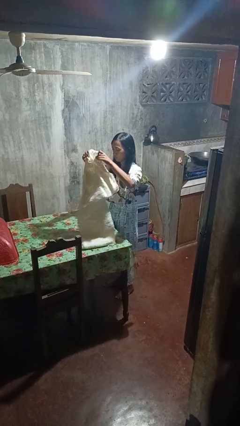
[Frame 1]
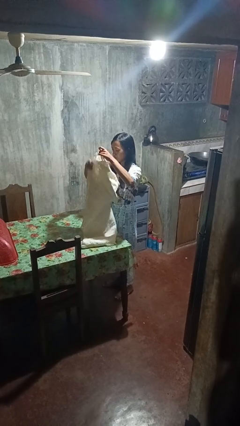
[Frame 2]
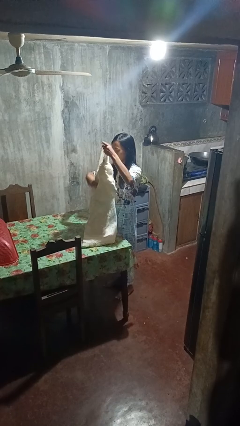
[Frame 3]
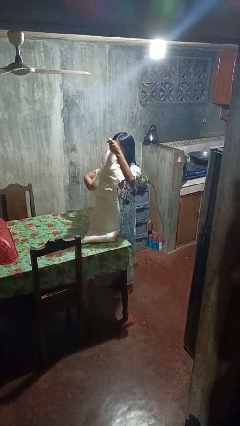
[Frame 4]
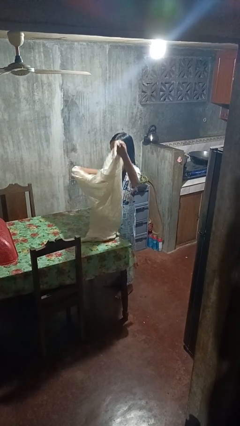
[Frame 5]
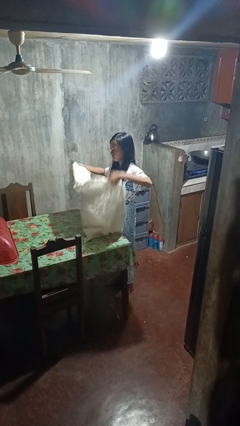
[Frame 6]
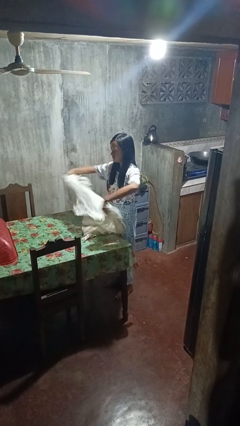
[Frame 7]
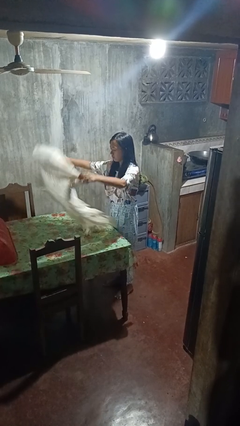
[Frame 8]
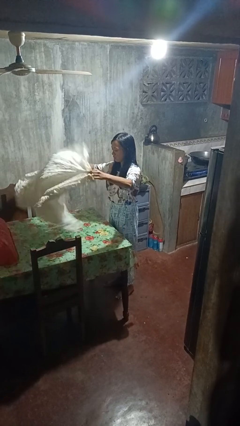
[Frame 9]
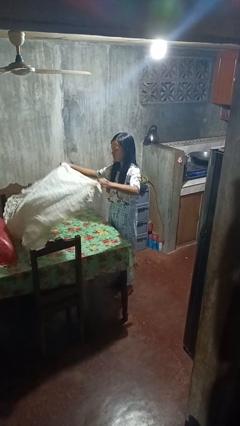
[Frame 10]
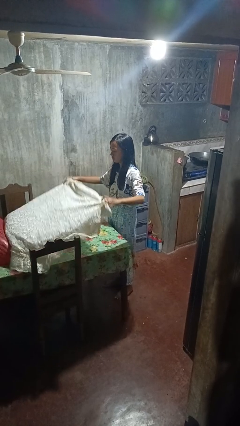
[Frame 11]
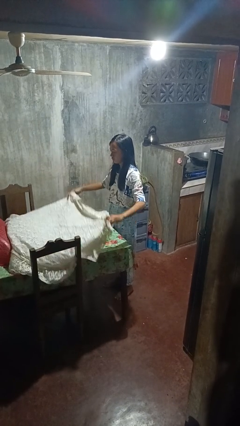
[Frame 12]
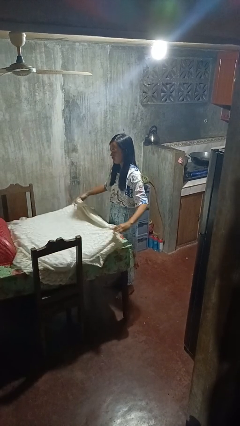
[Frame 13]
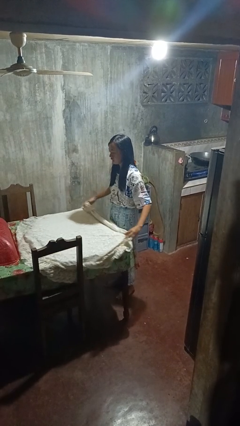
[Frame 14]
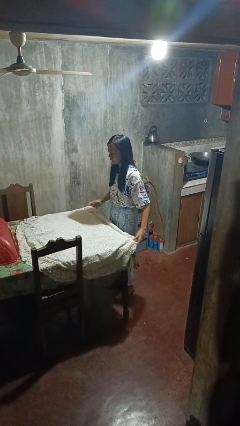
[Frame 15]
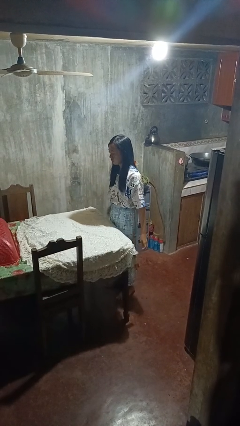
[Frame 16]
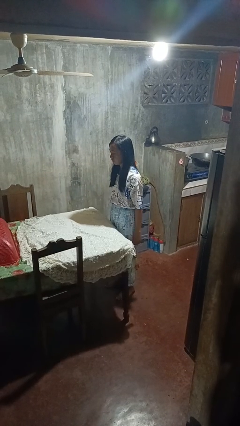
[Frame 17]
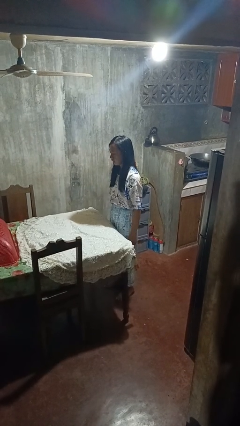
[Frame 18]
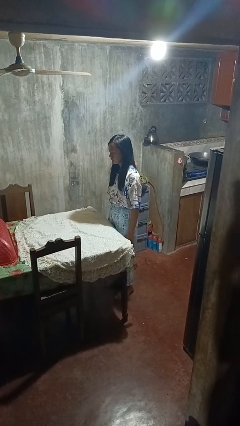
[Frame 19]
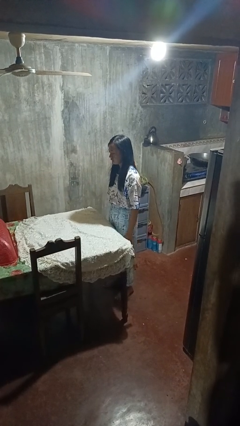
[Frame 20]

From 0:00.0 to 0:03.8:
person spreads tablecloth

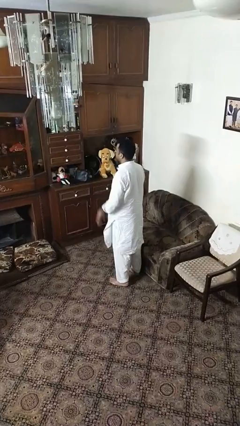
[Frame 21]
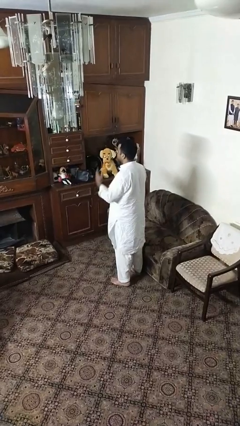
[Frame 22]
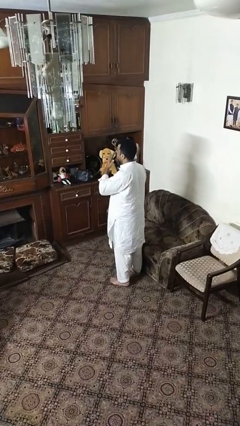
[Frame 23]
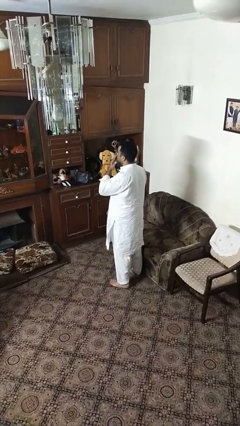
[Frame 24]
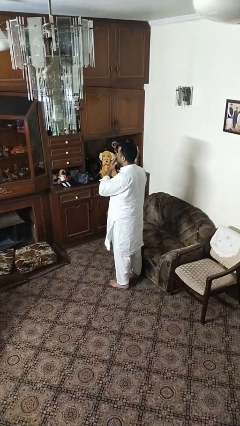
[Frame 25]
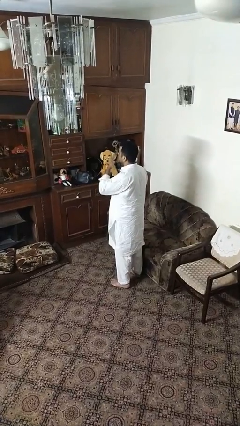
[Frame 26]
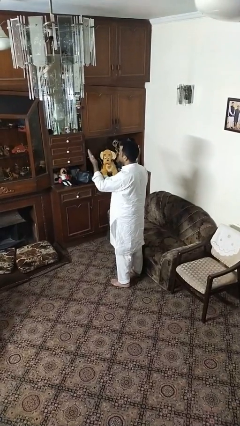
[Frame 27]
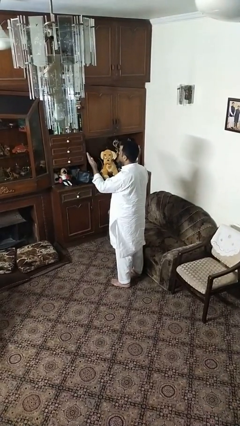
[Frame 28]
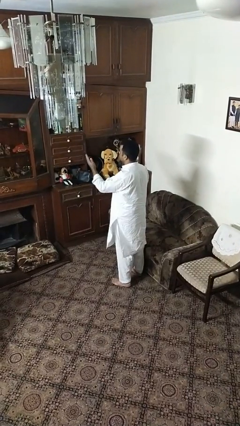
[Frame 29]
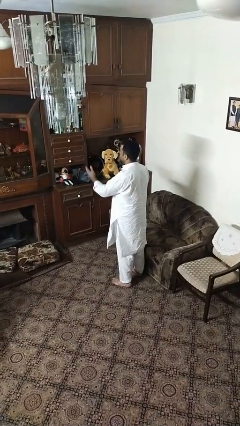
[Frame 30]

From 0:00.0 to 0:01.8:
person gestures blow kiss

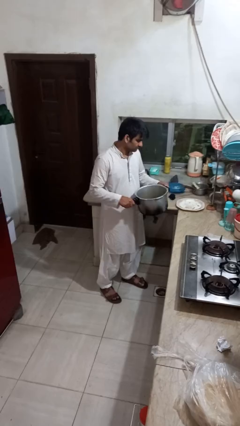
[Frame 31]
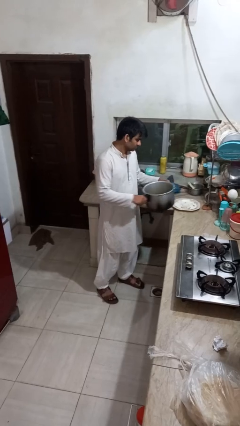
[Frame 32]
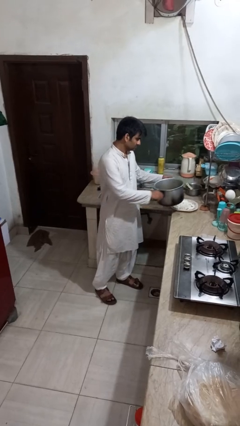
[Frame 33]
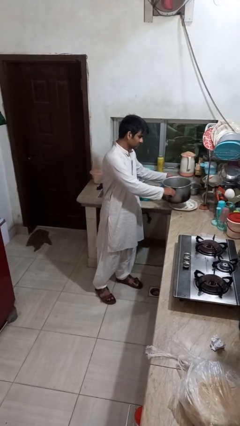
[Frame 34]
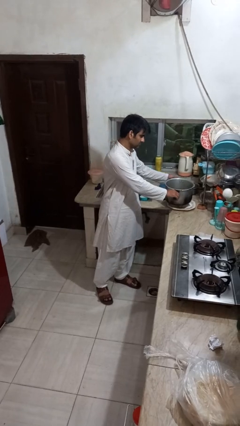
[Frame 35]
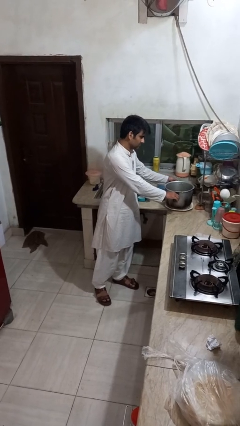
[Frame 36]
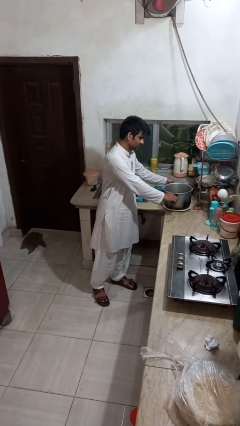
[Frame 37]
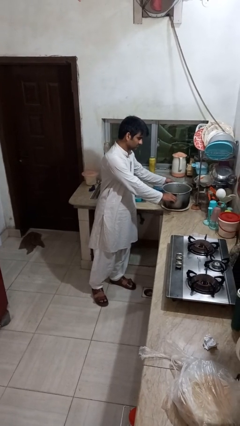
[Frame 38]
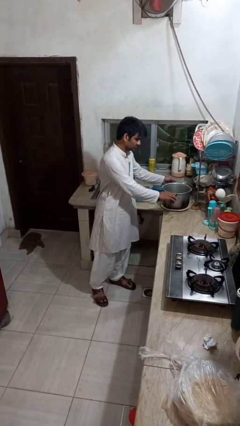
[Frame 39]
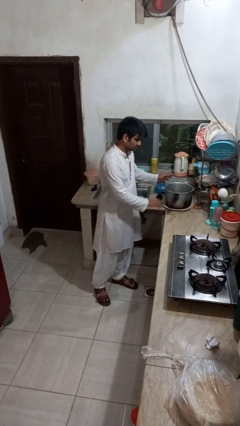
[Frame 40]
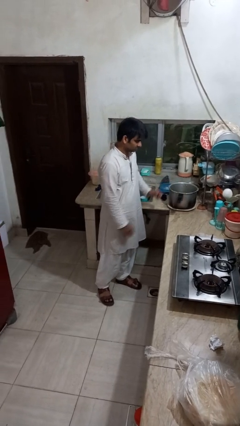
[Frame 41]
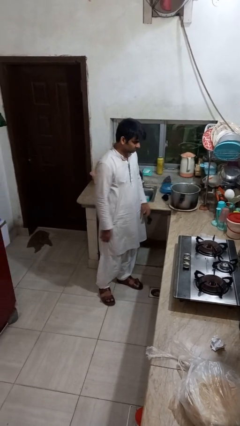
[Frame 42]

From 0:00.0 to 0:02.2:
person puts down object on countertop

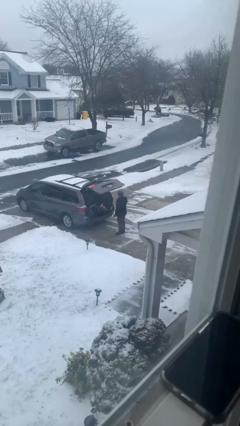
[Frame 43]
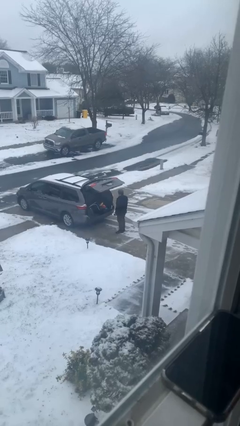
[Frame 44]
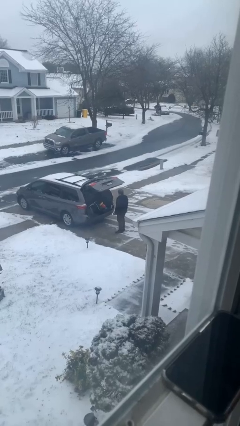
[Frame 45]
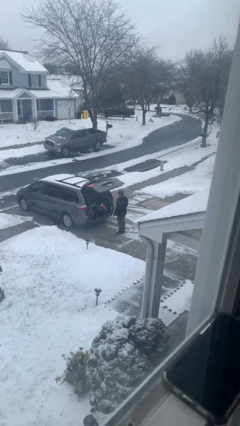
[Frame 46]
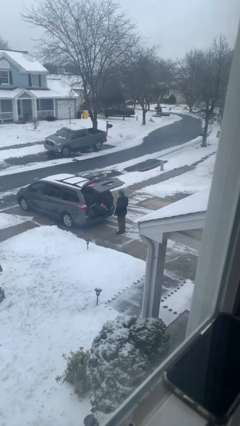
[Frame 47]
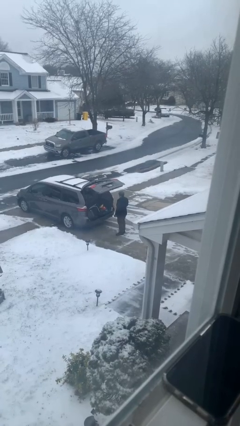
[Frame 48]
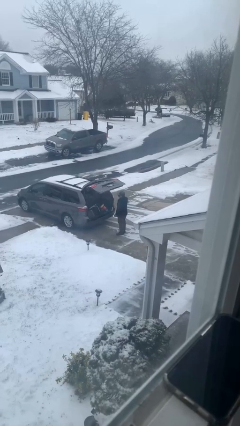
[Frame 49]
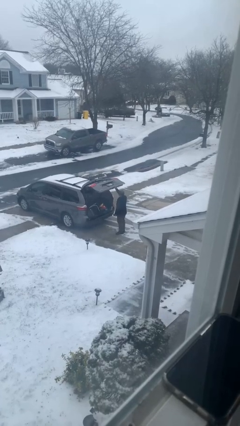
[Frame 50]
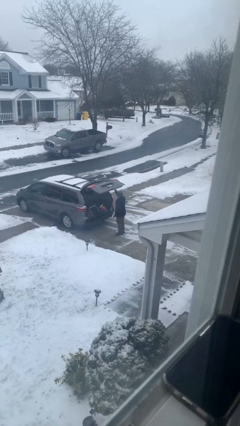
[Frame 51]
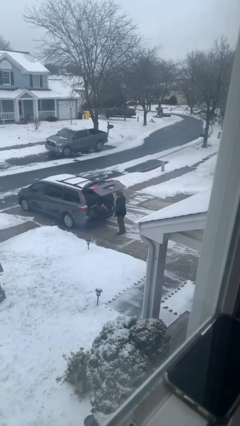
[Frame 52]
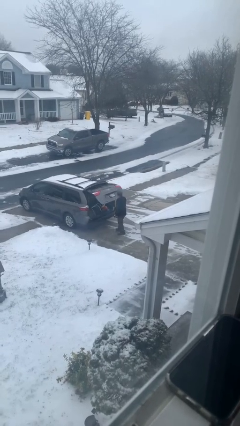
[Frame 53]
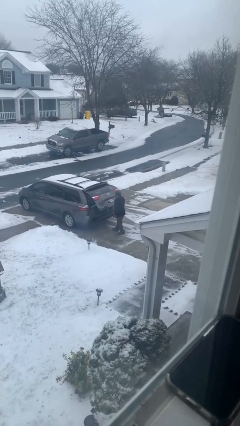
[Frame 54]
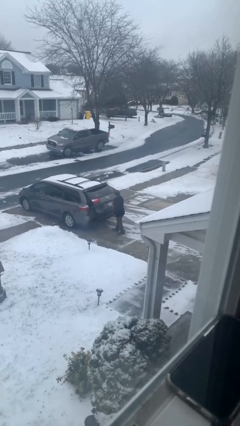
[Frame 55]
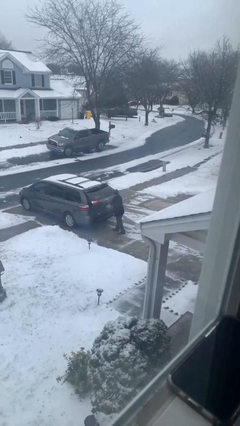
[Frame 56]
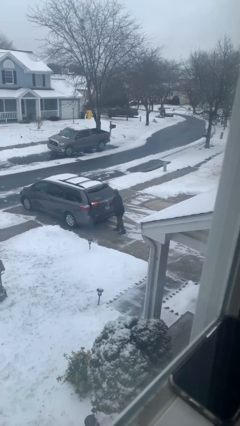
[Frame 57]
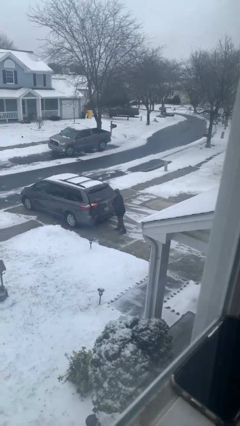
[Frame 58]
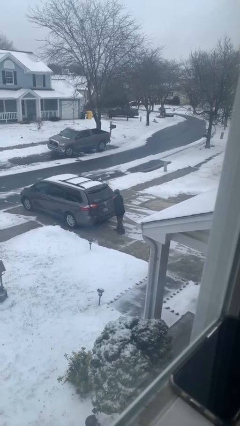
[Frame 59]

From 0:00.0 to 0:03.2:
person closes car trunk

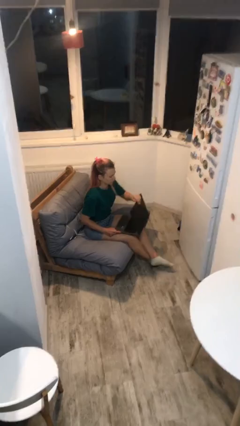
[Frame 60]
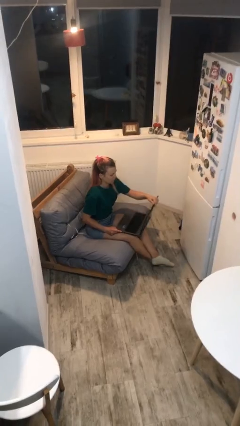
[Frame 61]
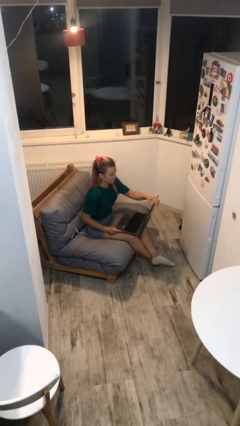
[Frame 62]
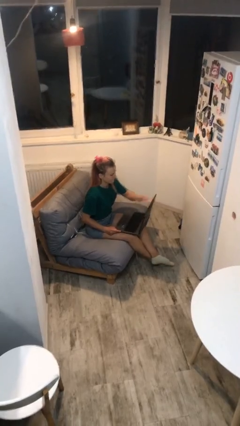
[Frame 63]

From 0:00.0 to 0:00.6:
person opens laptop

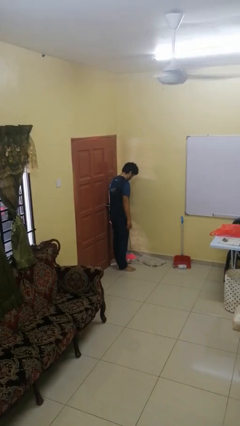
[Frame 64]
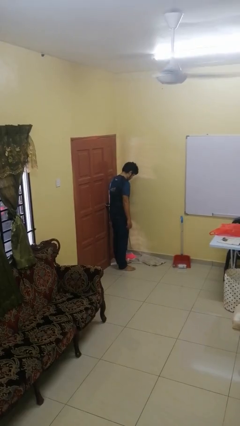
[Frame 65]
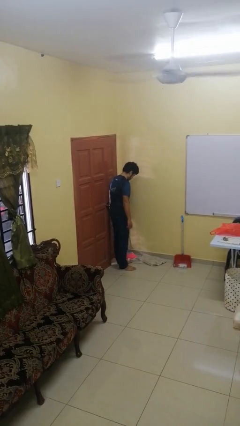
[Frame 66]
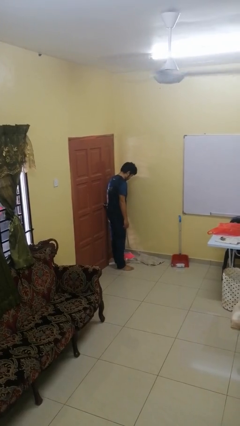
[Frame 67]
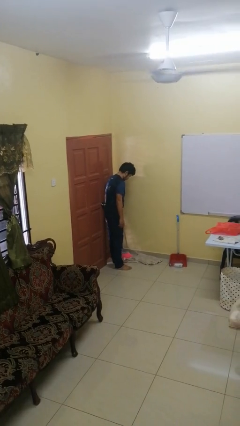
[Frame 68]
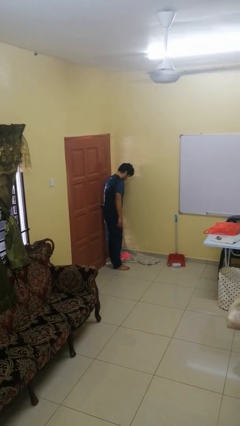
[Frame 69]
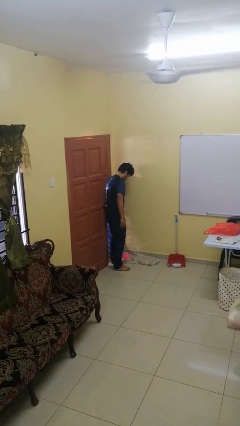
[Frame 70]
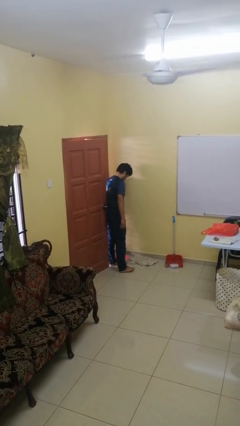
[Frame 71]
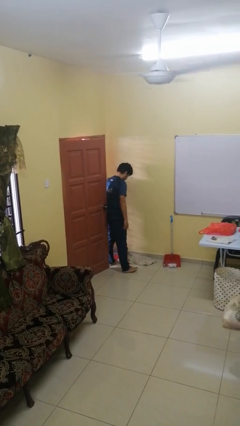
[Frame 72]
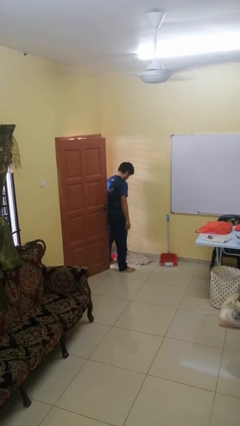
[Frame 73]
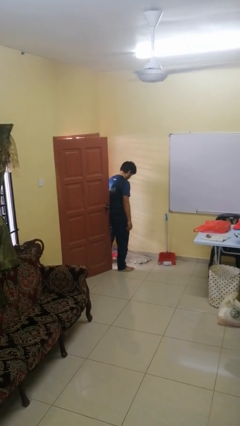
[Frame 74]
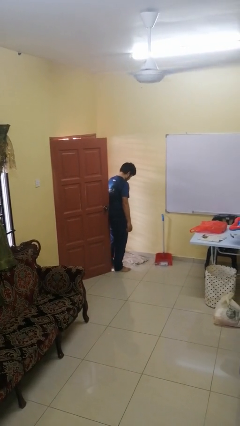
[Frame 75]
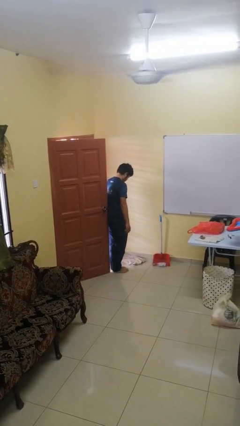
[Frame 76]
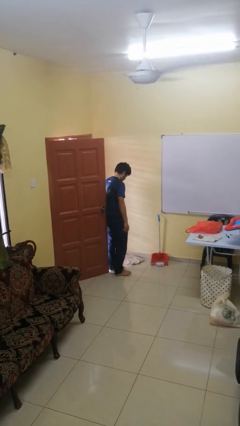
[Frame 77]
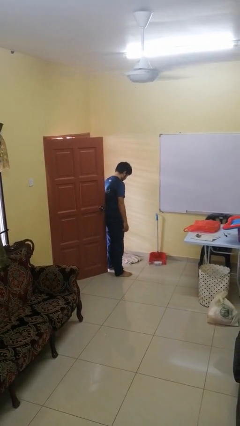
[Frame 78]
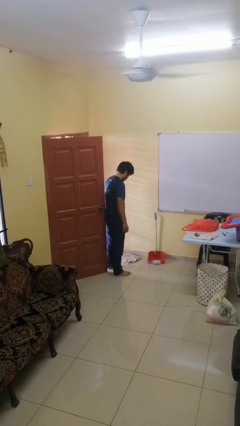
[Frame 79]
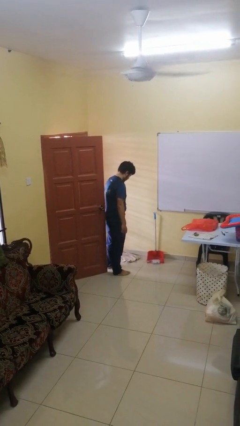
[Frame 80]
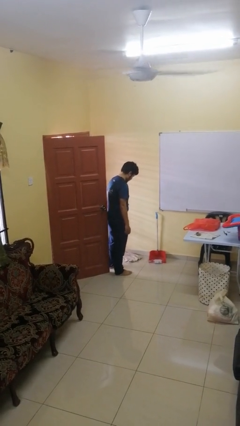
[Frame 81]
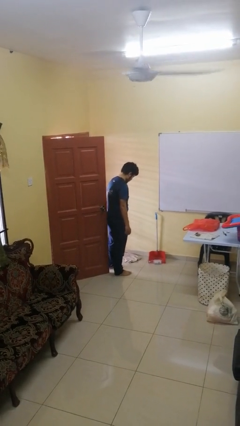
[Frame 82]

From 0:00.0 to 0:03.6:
person opens facility door

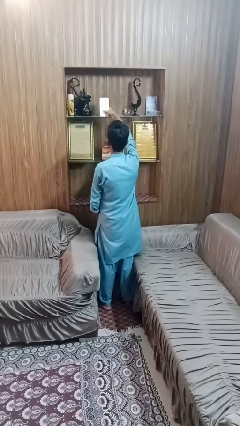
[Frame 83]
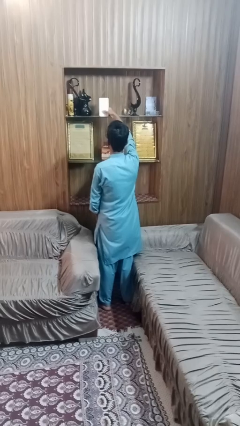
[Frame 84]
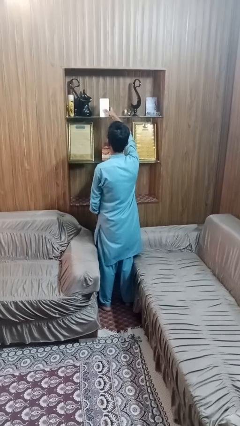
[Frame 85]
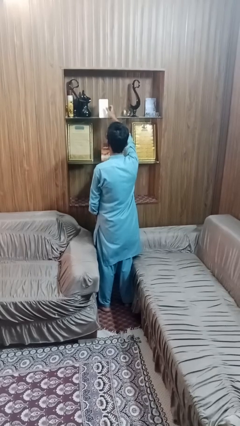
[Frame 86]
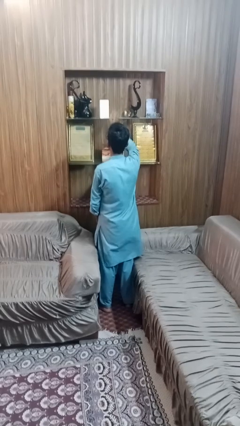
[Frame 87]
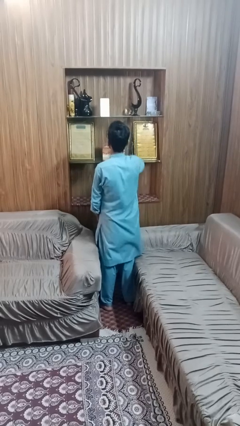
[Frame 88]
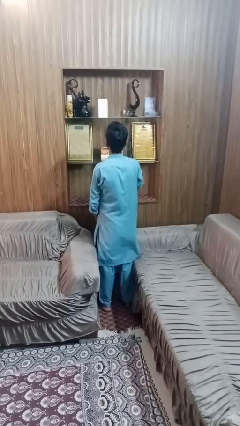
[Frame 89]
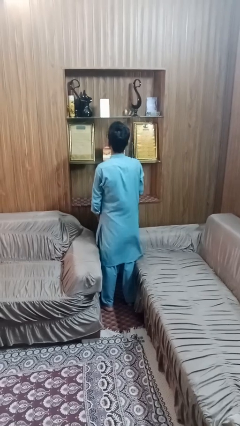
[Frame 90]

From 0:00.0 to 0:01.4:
person puts down object on shelf

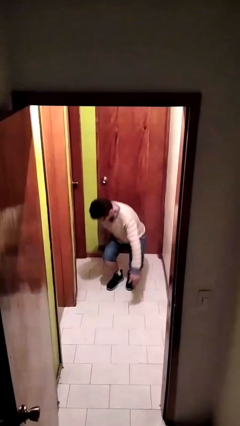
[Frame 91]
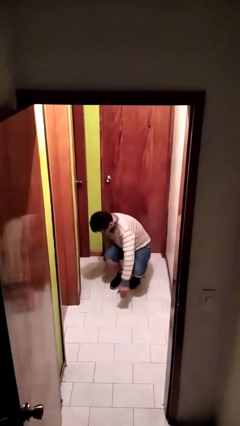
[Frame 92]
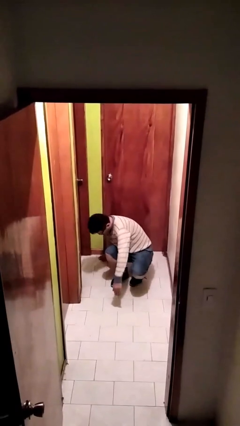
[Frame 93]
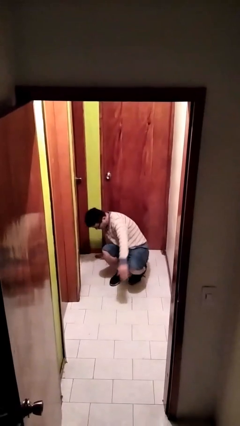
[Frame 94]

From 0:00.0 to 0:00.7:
person sits down
